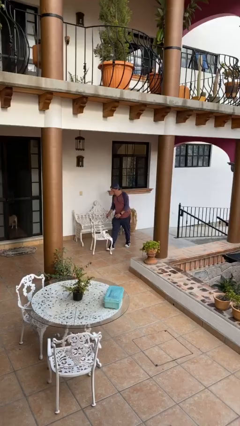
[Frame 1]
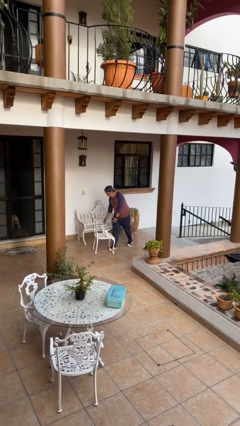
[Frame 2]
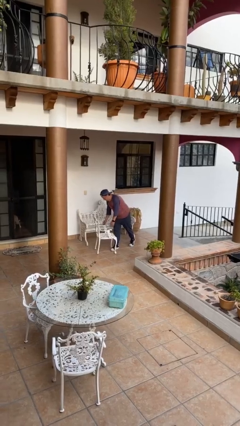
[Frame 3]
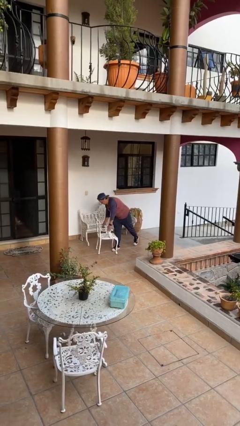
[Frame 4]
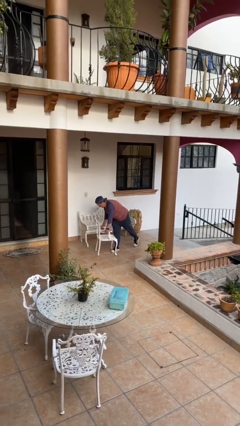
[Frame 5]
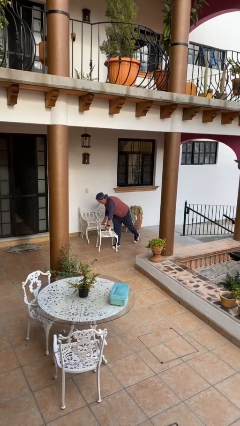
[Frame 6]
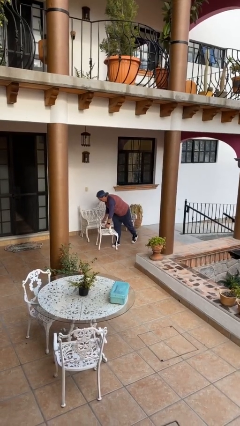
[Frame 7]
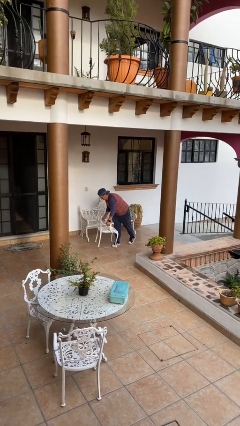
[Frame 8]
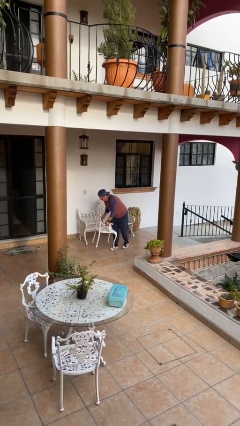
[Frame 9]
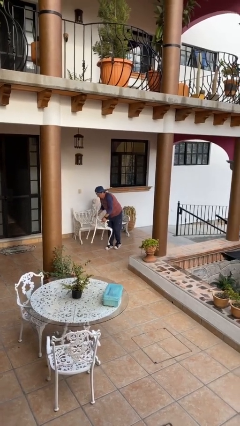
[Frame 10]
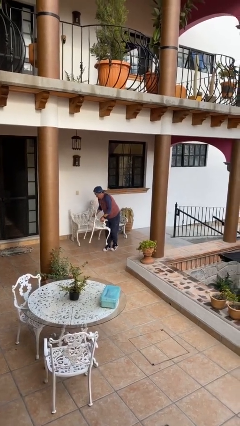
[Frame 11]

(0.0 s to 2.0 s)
person picks up object from floor

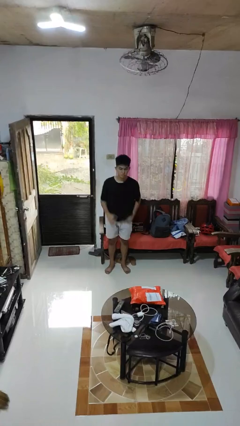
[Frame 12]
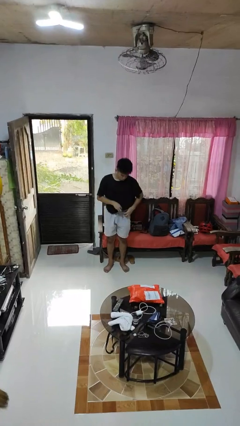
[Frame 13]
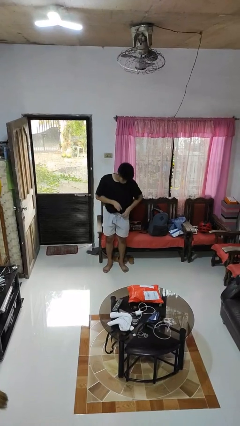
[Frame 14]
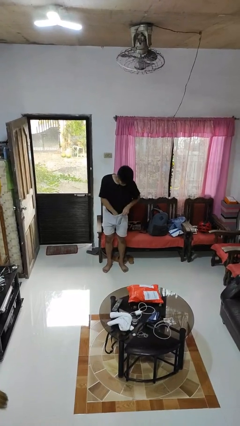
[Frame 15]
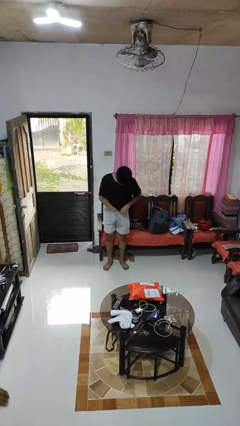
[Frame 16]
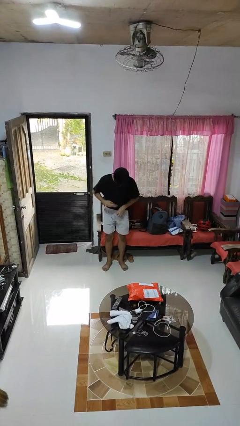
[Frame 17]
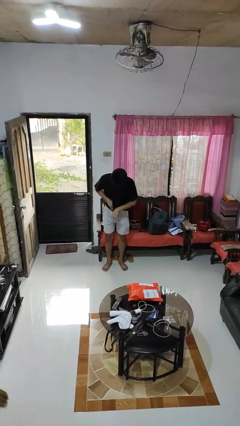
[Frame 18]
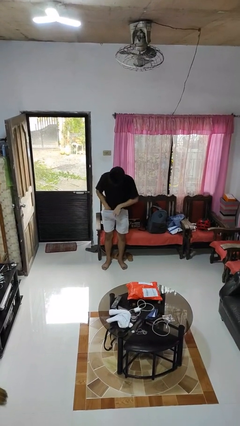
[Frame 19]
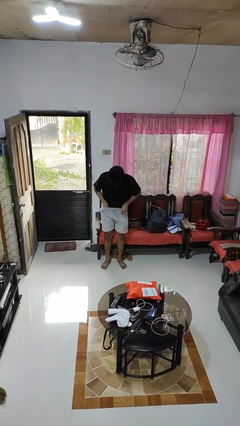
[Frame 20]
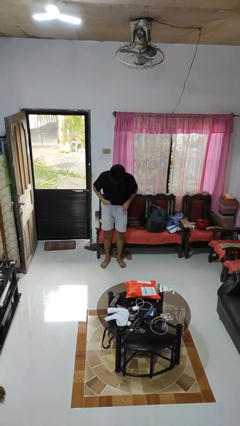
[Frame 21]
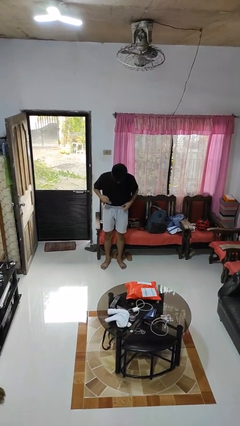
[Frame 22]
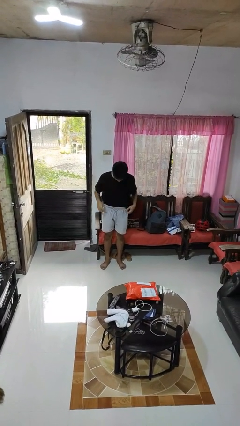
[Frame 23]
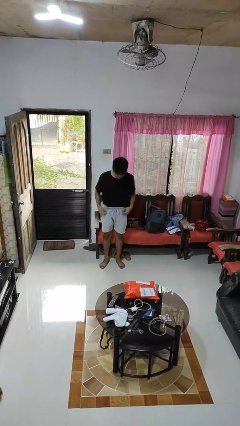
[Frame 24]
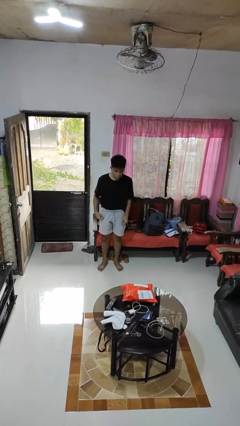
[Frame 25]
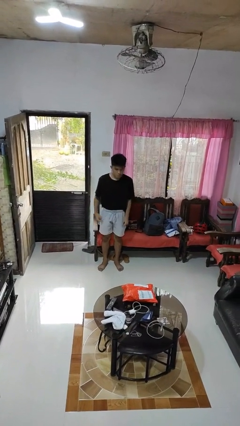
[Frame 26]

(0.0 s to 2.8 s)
person tucks in shirt

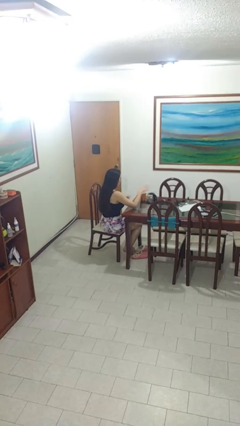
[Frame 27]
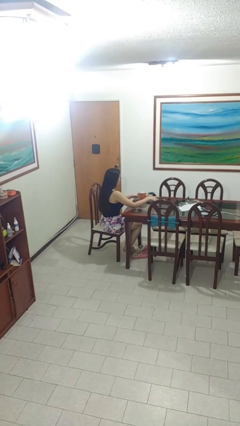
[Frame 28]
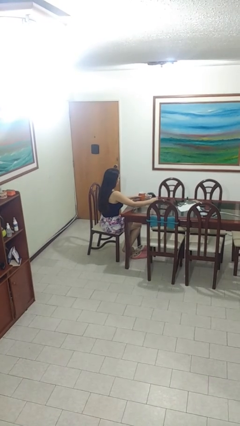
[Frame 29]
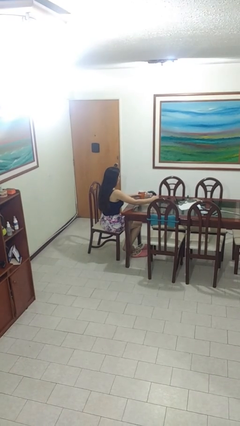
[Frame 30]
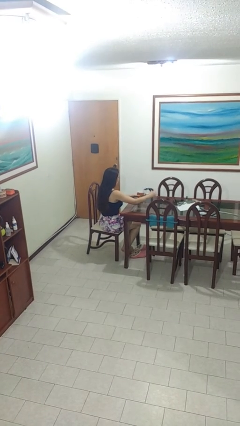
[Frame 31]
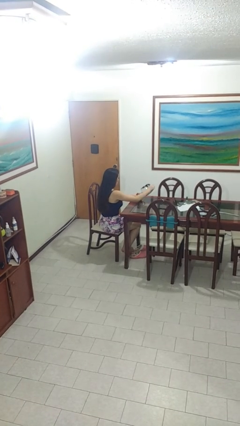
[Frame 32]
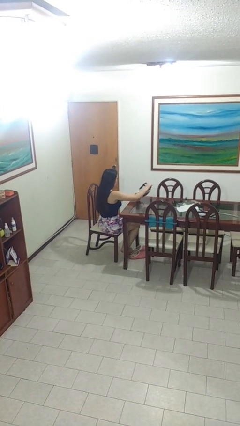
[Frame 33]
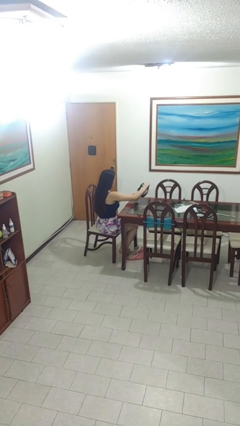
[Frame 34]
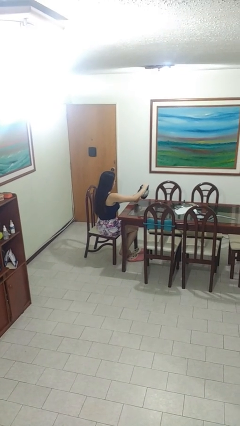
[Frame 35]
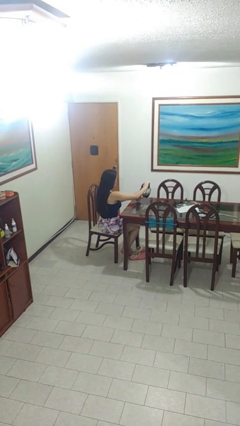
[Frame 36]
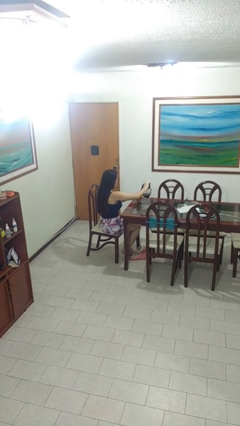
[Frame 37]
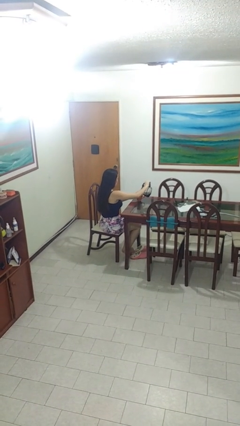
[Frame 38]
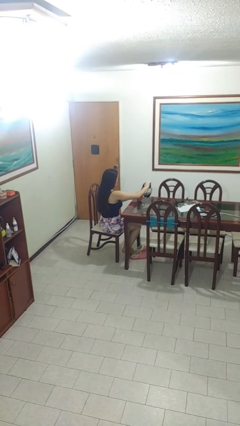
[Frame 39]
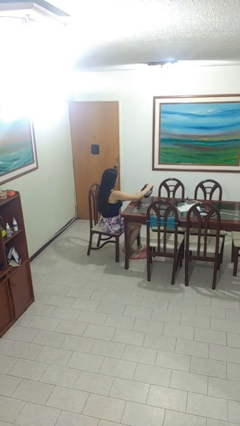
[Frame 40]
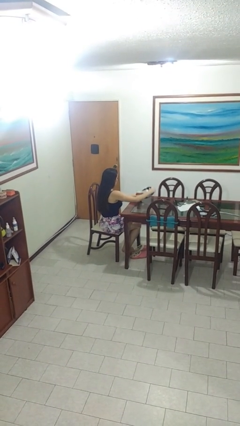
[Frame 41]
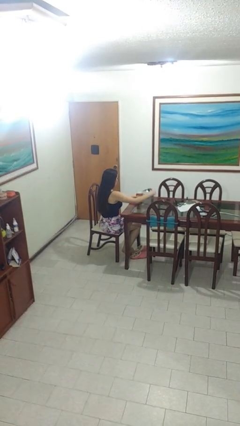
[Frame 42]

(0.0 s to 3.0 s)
person pours coffee into mug

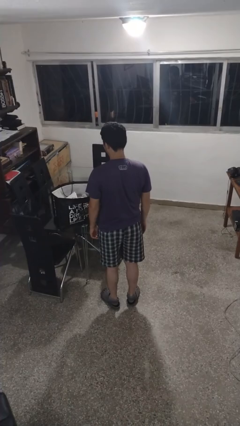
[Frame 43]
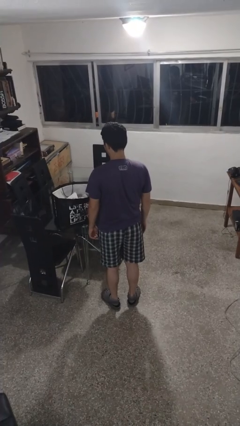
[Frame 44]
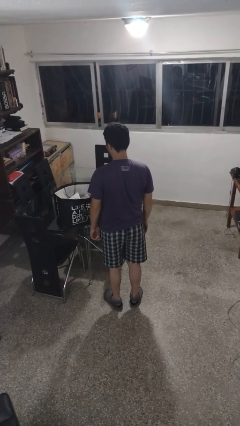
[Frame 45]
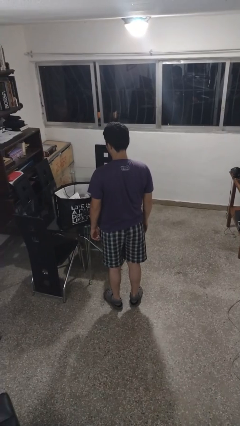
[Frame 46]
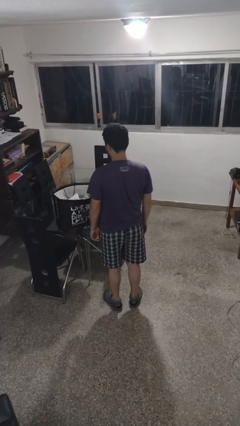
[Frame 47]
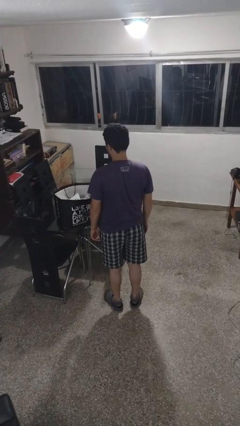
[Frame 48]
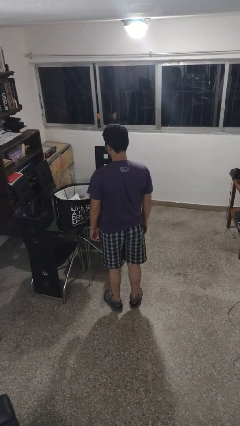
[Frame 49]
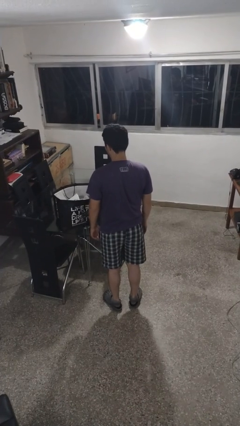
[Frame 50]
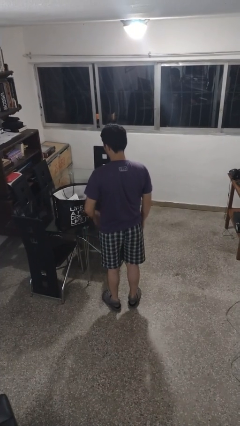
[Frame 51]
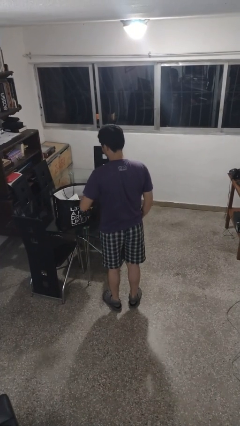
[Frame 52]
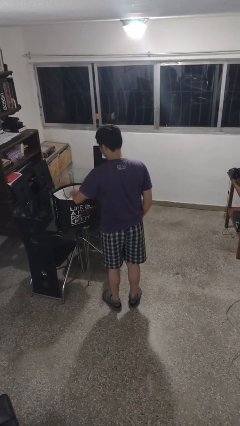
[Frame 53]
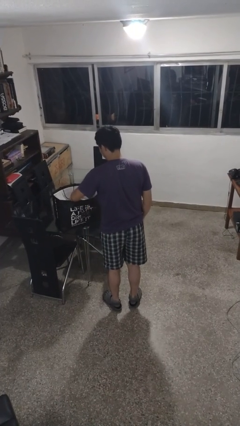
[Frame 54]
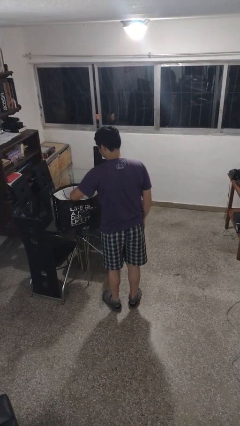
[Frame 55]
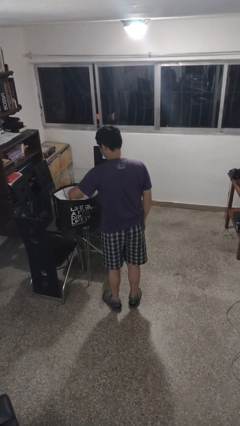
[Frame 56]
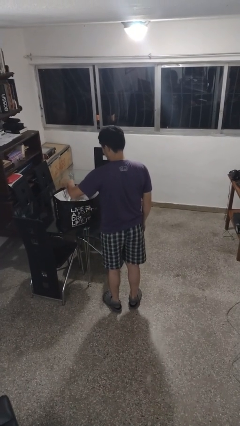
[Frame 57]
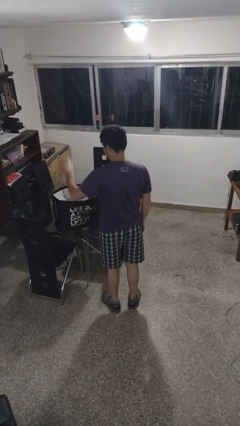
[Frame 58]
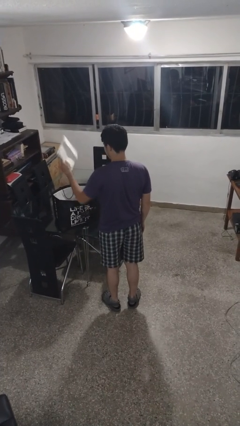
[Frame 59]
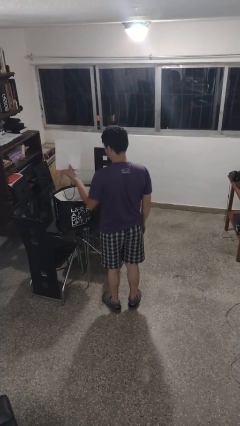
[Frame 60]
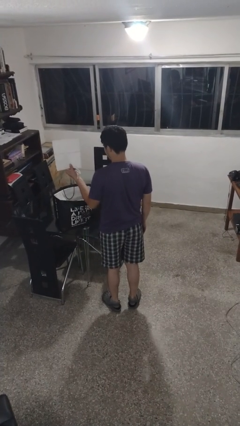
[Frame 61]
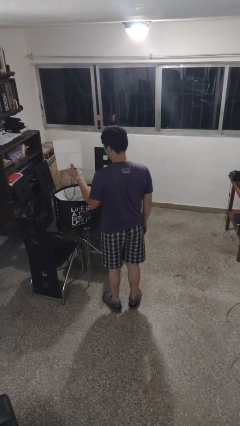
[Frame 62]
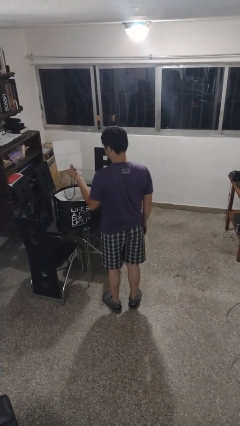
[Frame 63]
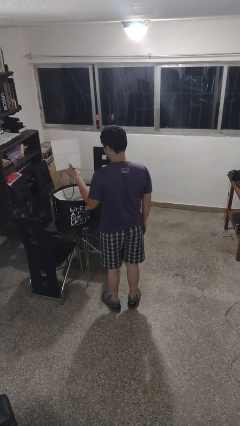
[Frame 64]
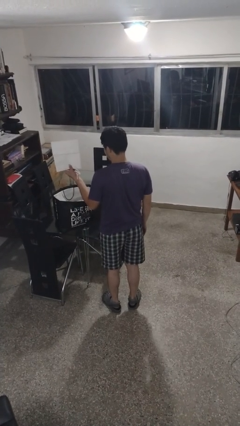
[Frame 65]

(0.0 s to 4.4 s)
person takes object from bag

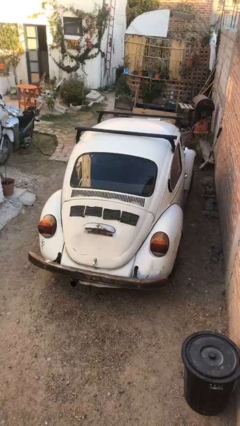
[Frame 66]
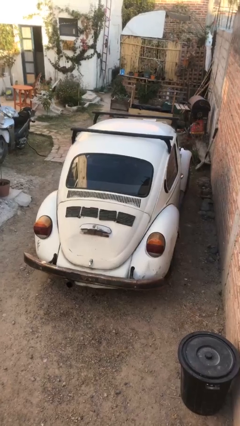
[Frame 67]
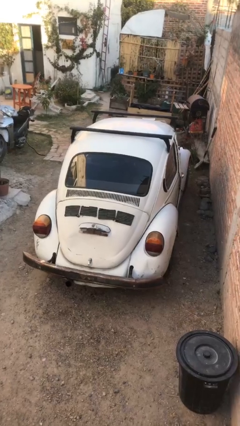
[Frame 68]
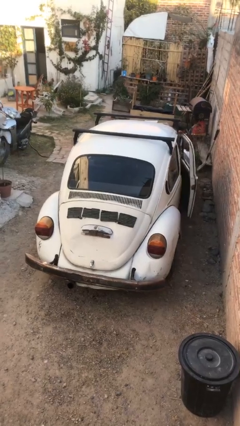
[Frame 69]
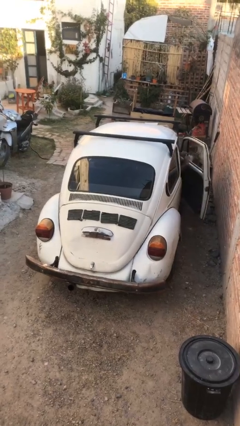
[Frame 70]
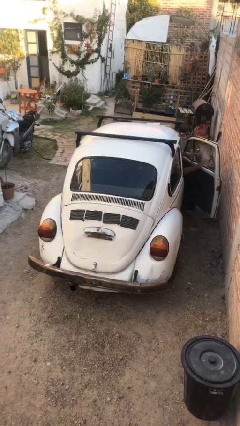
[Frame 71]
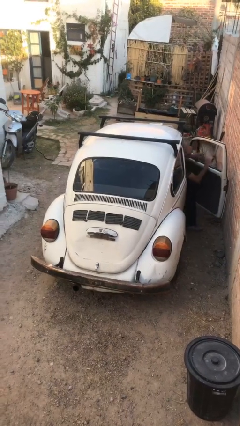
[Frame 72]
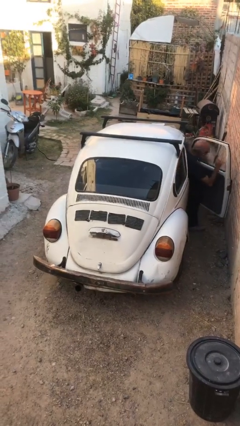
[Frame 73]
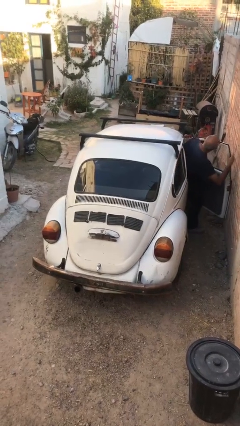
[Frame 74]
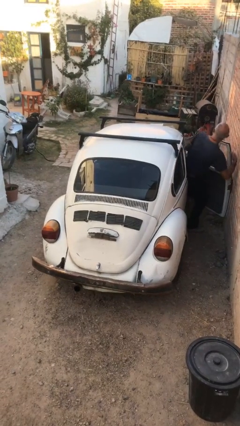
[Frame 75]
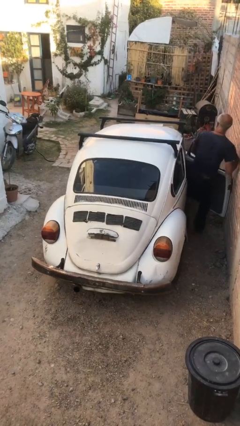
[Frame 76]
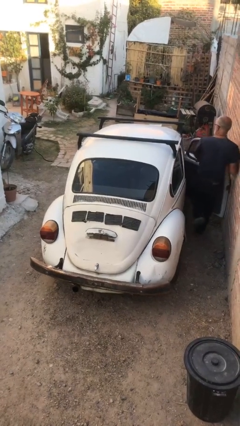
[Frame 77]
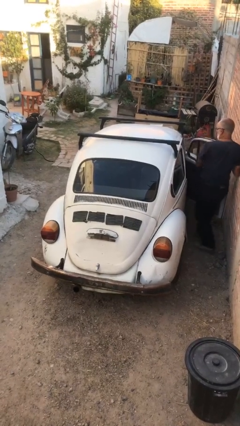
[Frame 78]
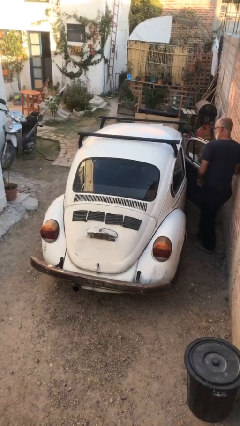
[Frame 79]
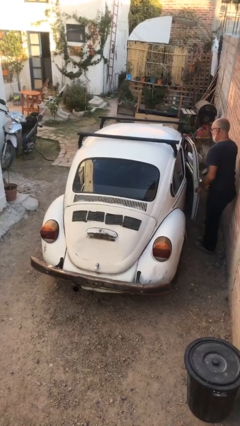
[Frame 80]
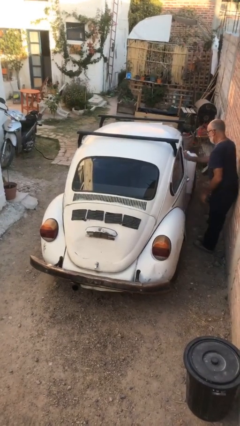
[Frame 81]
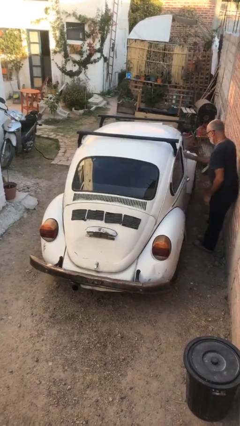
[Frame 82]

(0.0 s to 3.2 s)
car drops off person

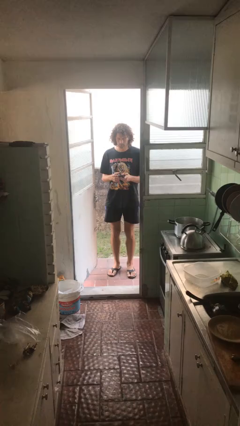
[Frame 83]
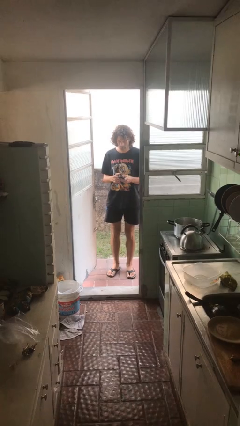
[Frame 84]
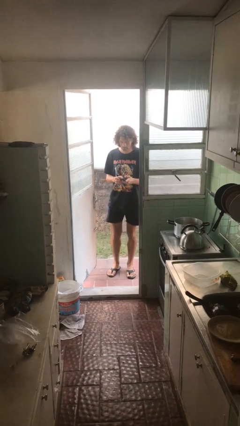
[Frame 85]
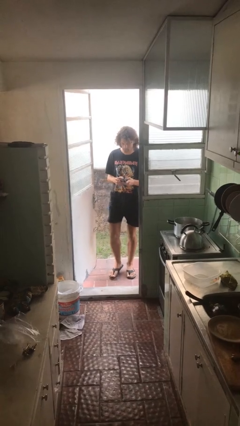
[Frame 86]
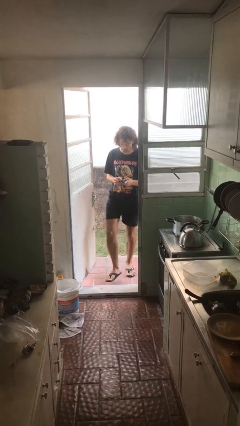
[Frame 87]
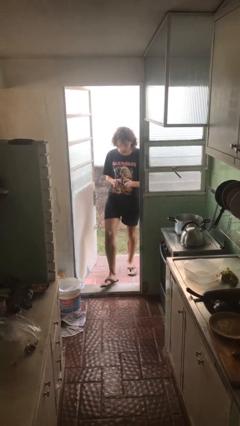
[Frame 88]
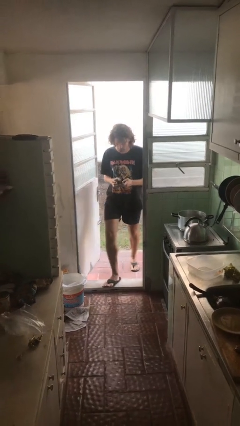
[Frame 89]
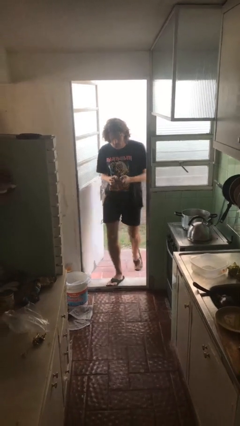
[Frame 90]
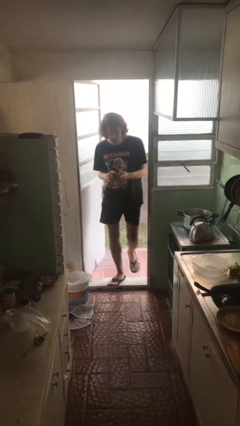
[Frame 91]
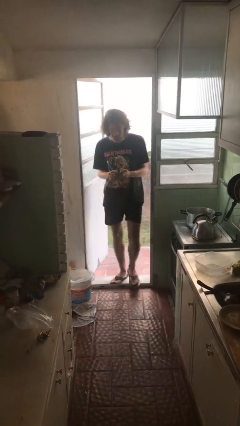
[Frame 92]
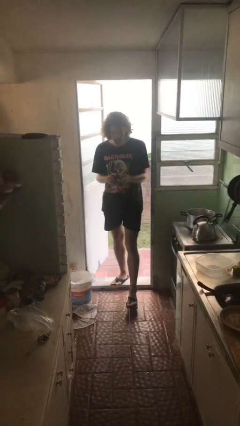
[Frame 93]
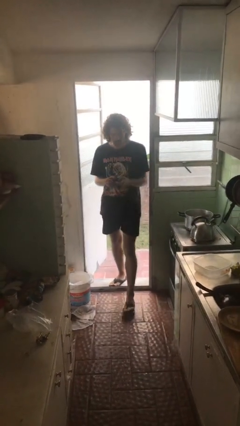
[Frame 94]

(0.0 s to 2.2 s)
person enters scene through structure
